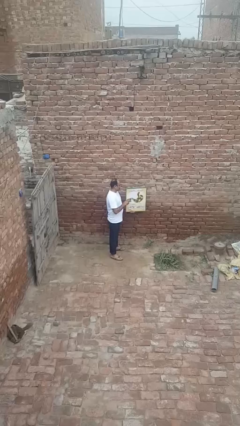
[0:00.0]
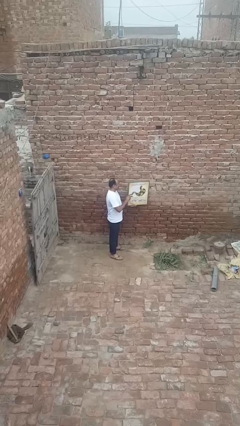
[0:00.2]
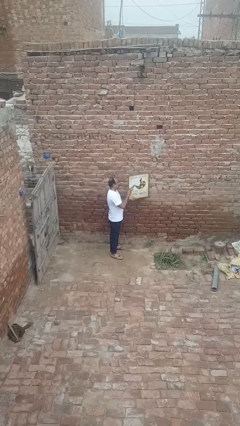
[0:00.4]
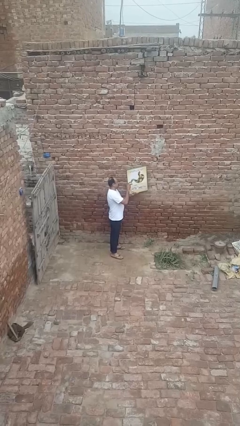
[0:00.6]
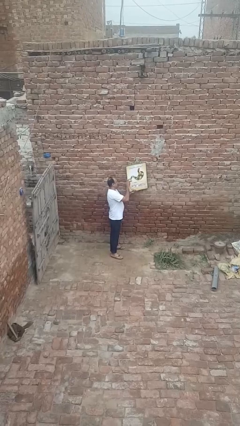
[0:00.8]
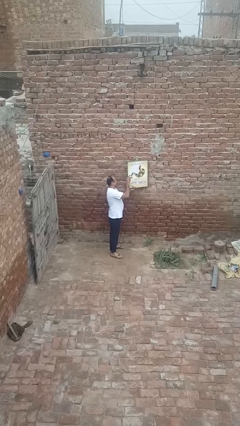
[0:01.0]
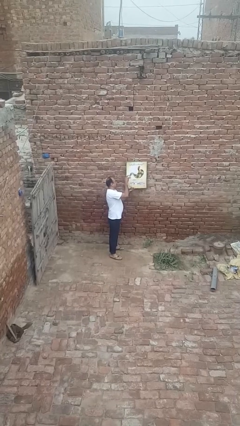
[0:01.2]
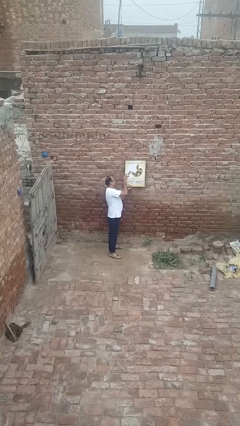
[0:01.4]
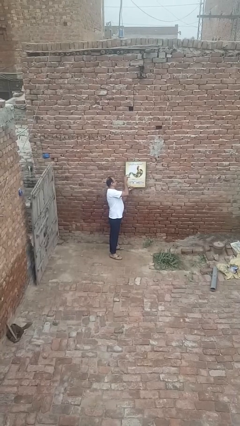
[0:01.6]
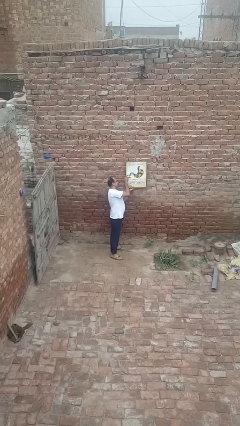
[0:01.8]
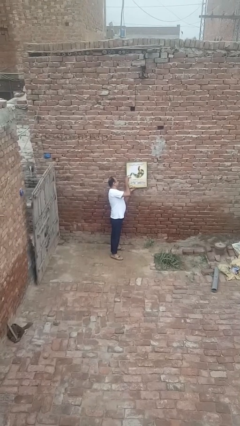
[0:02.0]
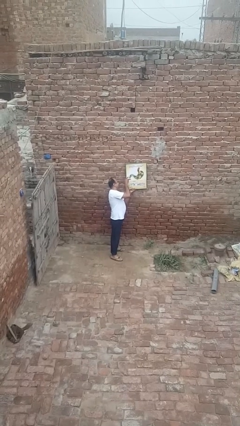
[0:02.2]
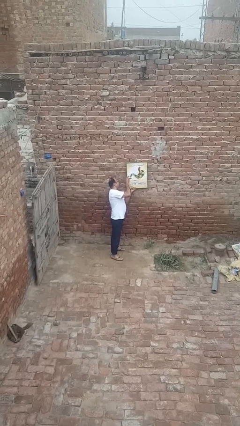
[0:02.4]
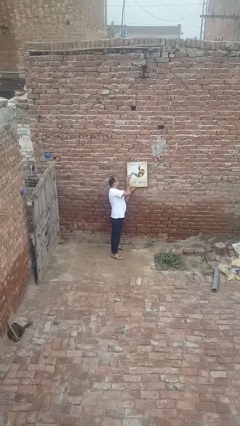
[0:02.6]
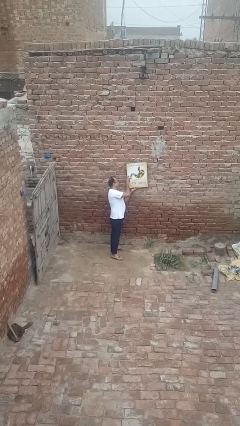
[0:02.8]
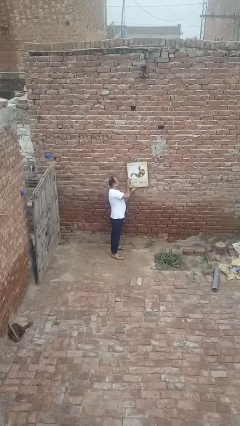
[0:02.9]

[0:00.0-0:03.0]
person puts up picture frame

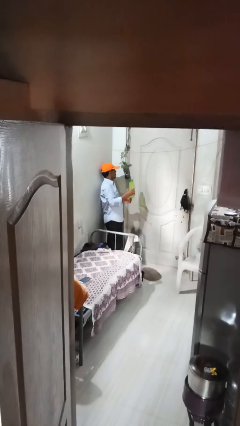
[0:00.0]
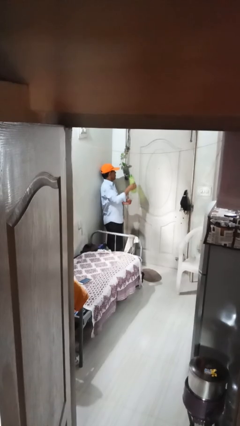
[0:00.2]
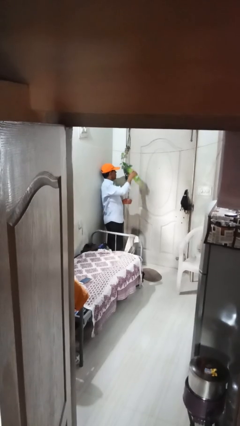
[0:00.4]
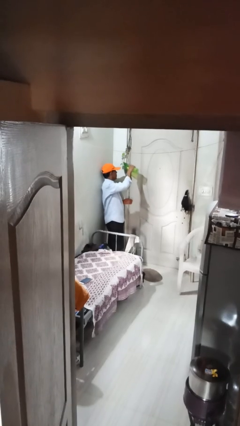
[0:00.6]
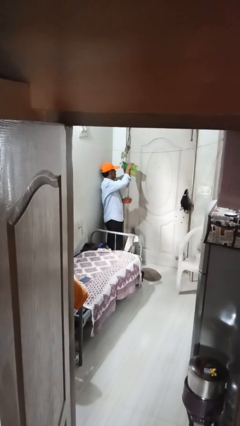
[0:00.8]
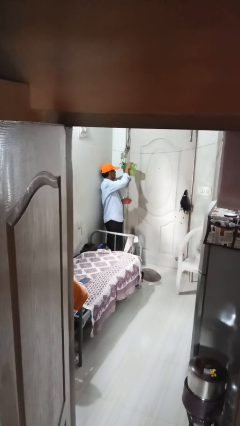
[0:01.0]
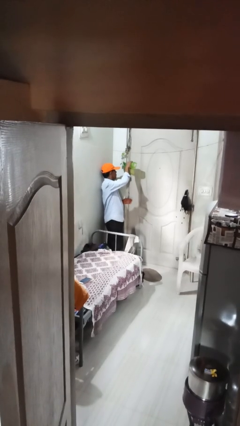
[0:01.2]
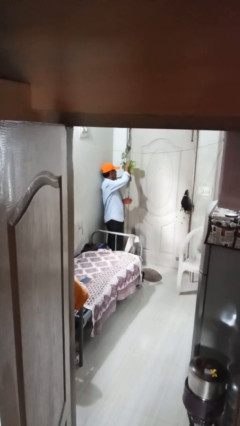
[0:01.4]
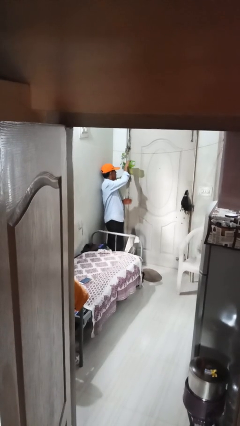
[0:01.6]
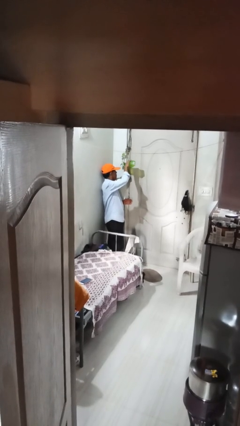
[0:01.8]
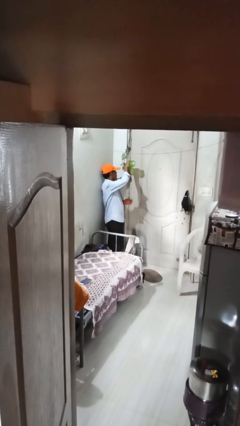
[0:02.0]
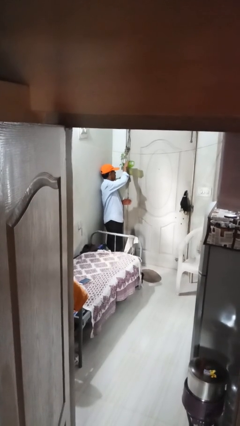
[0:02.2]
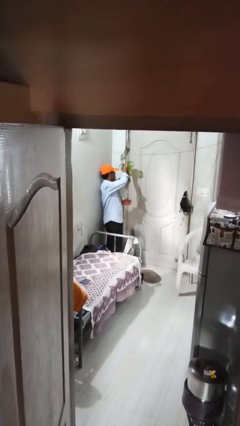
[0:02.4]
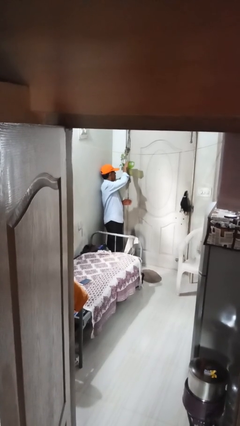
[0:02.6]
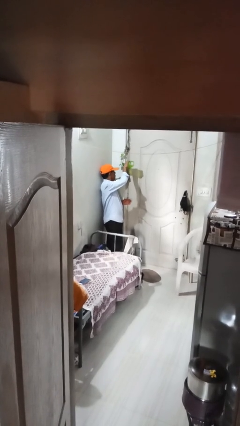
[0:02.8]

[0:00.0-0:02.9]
person waters houseplant

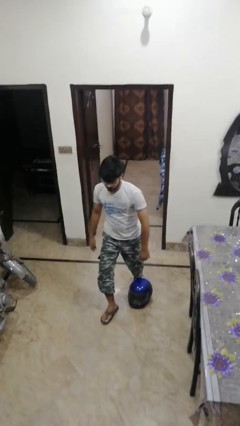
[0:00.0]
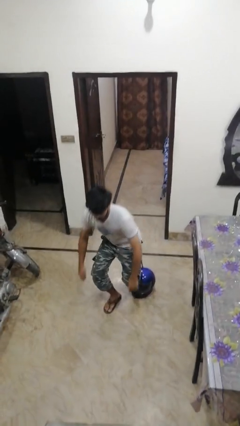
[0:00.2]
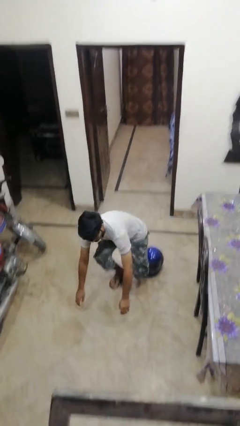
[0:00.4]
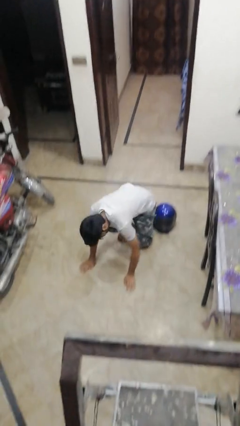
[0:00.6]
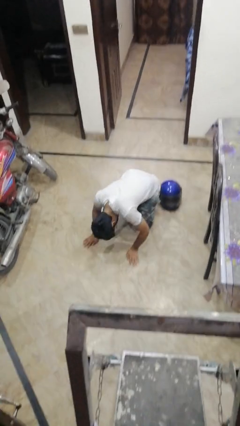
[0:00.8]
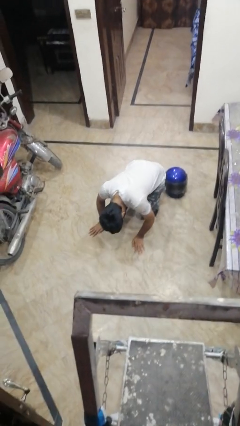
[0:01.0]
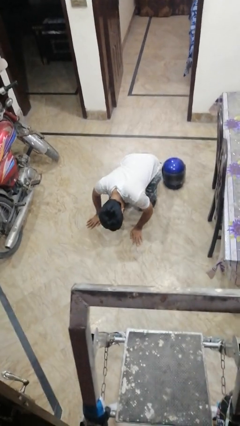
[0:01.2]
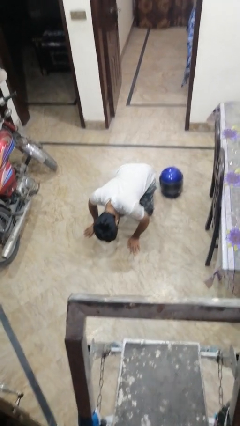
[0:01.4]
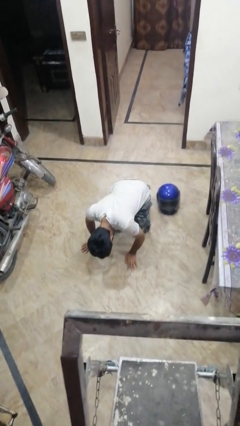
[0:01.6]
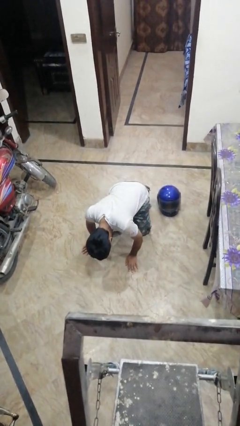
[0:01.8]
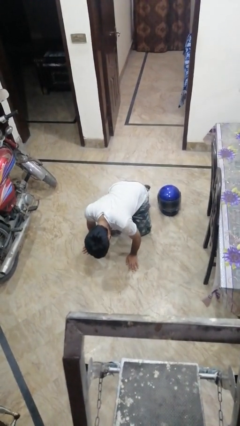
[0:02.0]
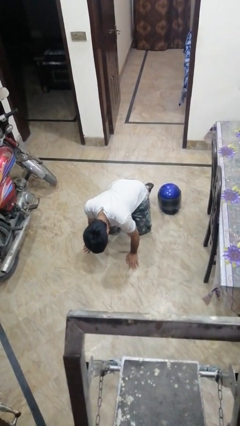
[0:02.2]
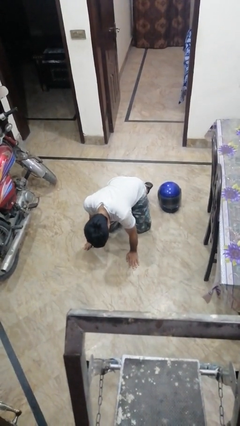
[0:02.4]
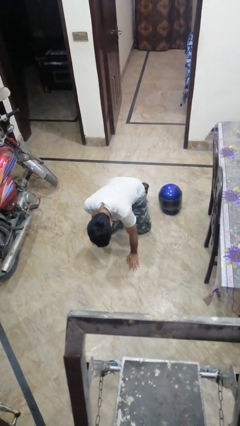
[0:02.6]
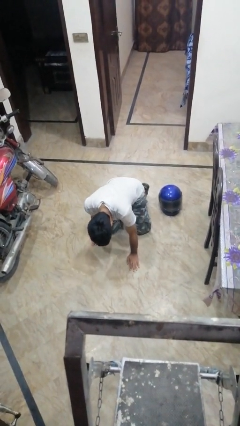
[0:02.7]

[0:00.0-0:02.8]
person trips on object on floor

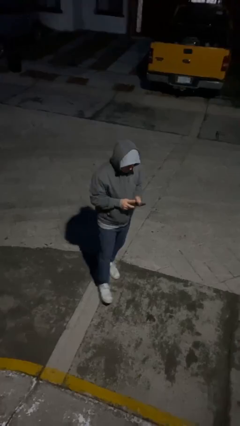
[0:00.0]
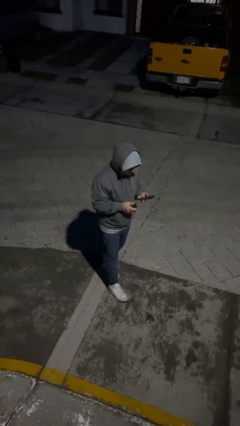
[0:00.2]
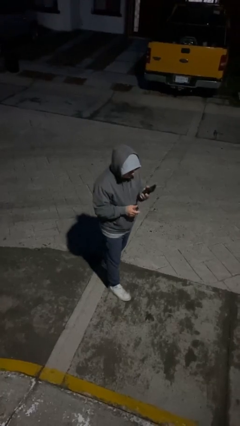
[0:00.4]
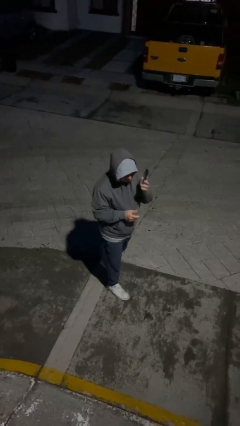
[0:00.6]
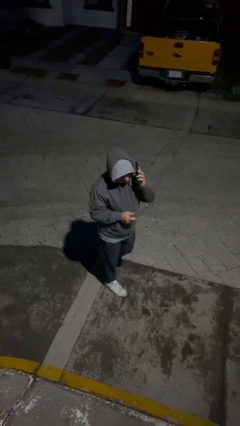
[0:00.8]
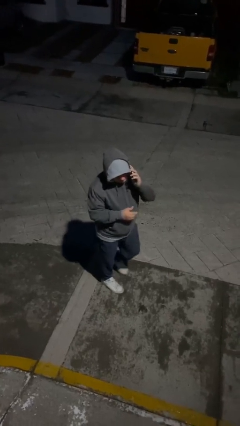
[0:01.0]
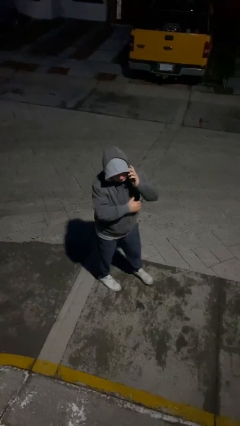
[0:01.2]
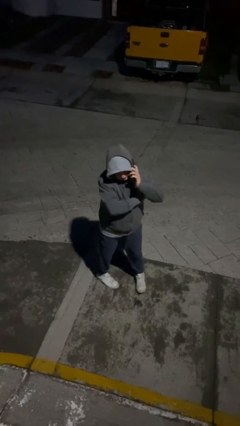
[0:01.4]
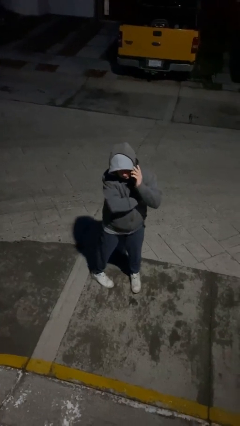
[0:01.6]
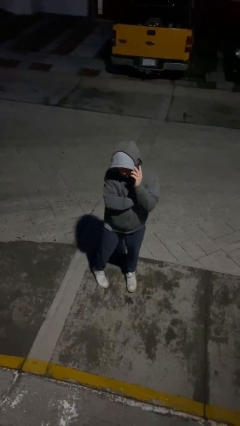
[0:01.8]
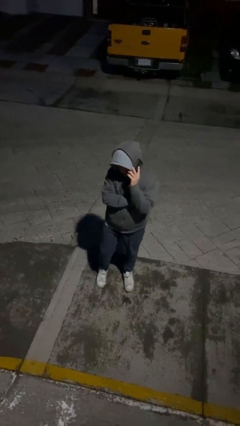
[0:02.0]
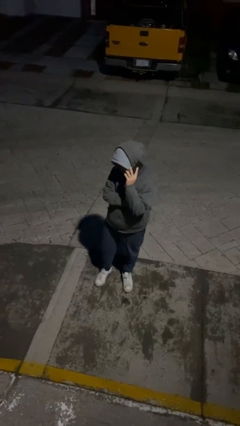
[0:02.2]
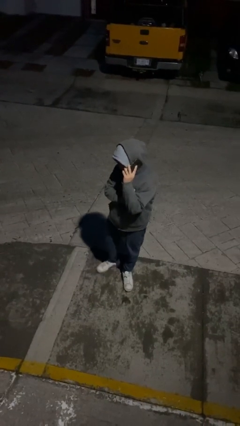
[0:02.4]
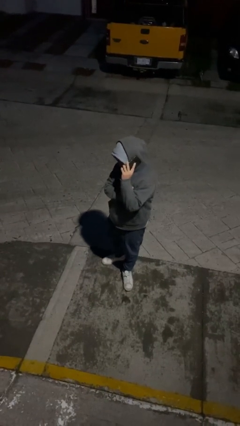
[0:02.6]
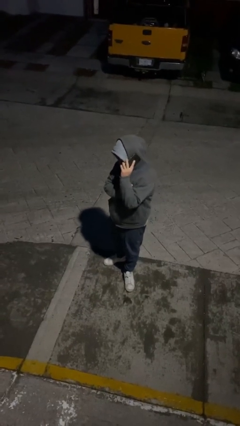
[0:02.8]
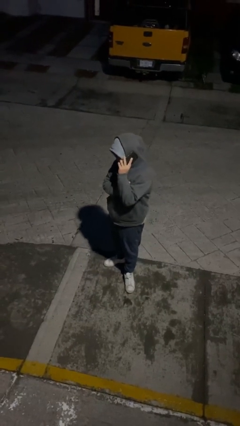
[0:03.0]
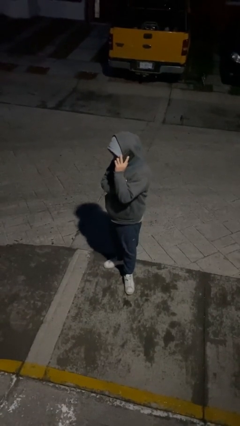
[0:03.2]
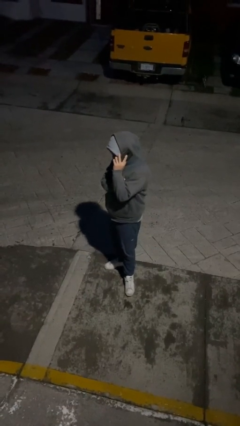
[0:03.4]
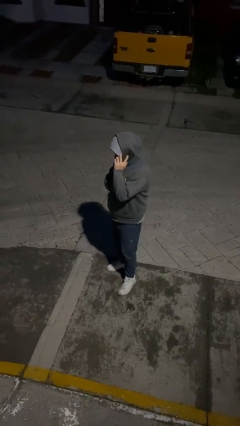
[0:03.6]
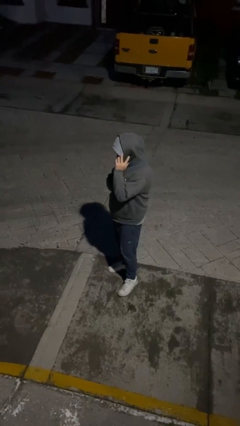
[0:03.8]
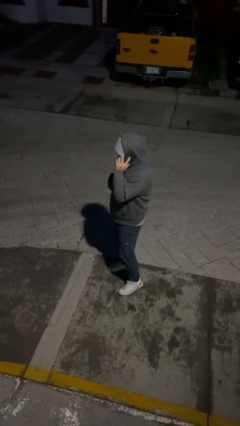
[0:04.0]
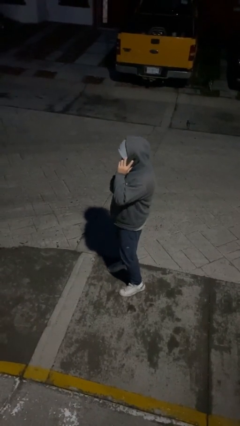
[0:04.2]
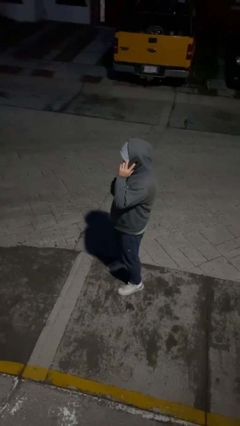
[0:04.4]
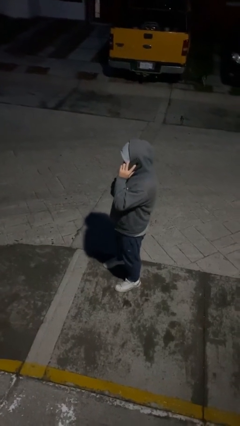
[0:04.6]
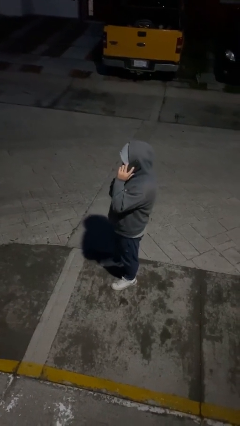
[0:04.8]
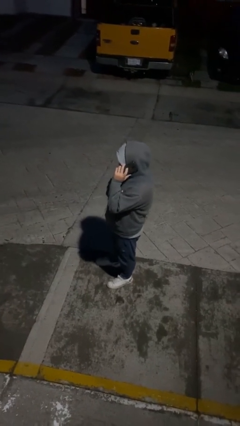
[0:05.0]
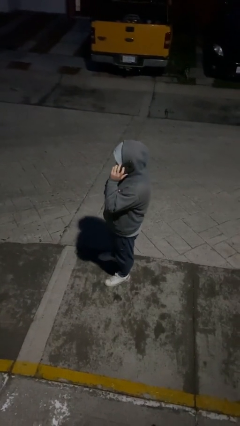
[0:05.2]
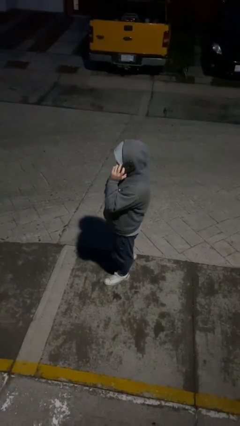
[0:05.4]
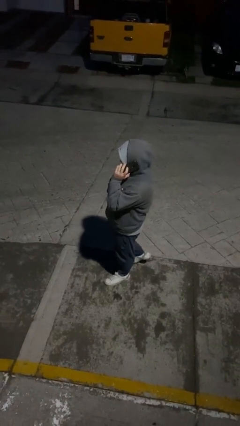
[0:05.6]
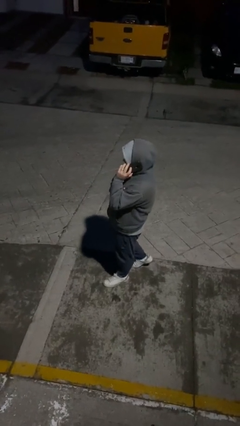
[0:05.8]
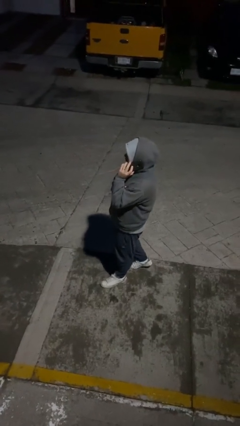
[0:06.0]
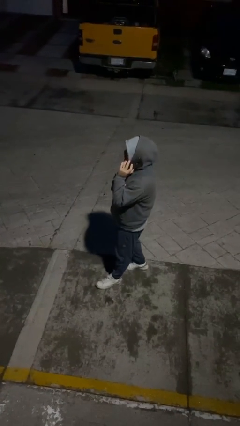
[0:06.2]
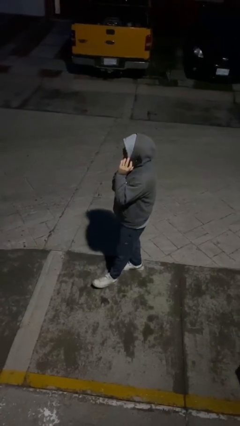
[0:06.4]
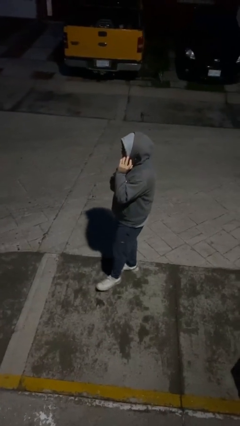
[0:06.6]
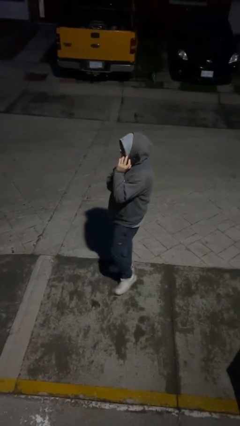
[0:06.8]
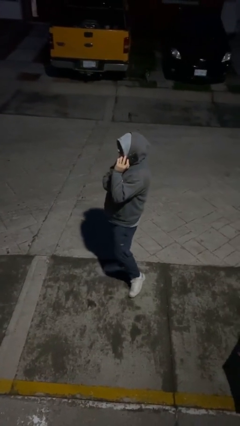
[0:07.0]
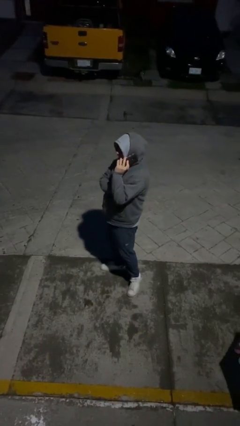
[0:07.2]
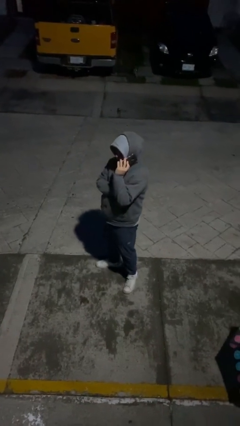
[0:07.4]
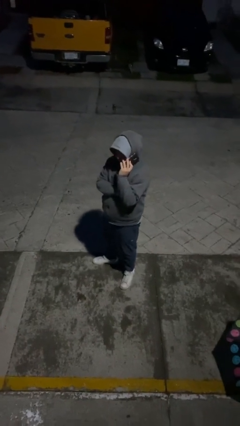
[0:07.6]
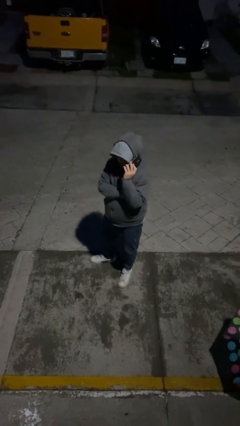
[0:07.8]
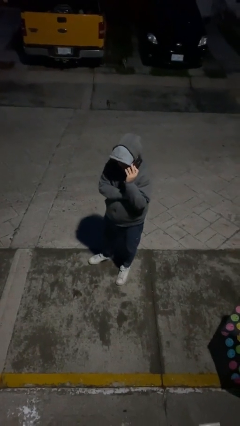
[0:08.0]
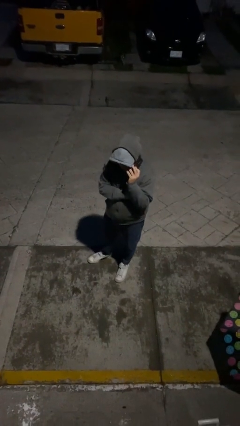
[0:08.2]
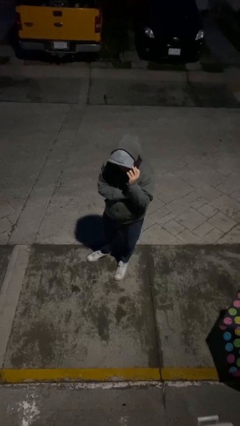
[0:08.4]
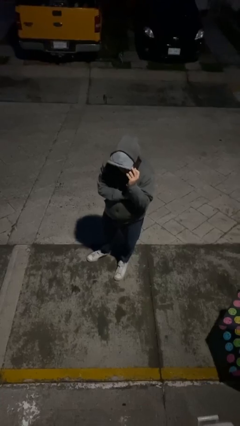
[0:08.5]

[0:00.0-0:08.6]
person talks on phone

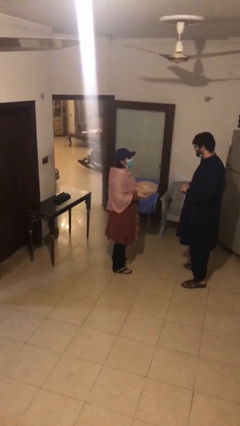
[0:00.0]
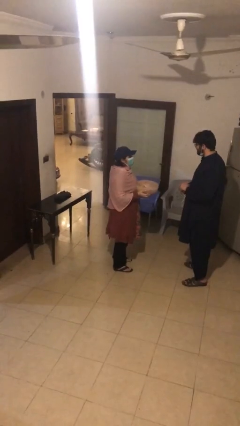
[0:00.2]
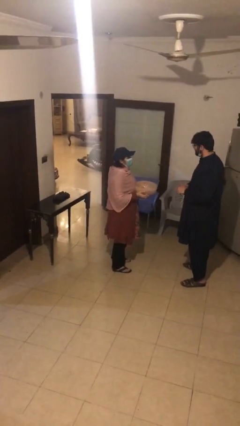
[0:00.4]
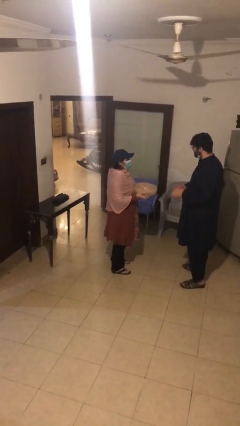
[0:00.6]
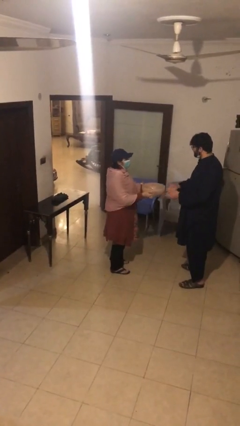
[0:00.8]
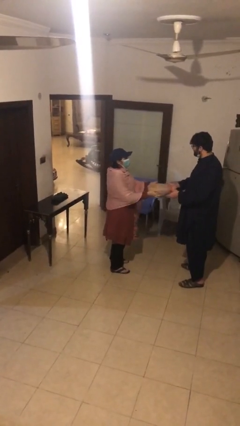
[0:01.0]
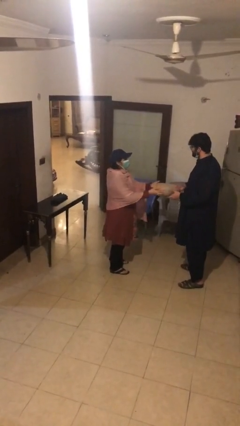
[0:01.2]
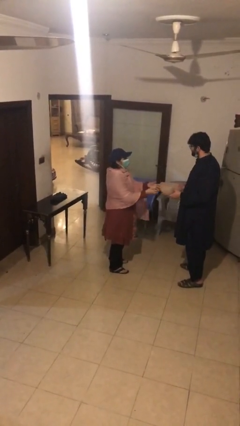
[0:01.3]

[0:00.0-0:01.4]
person transfers object to person
